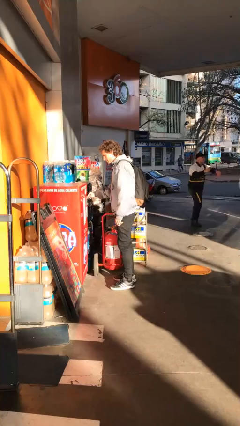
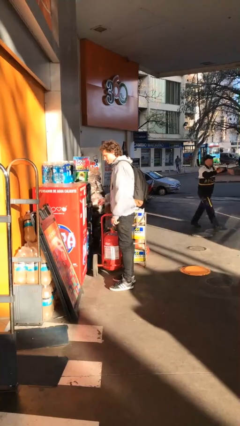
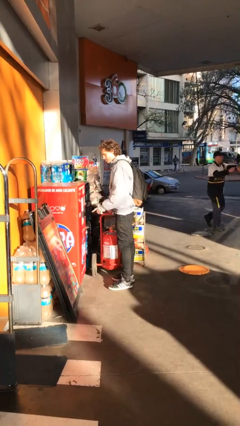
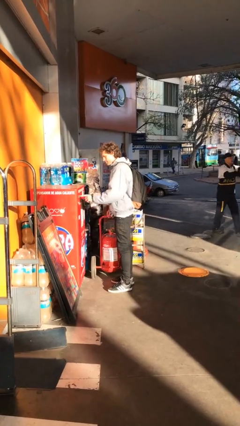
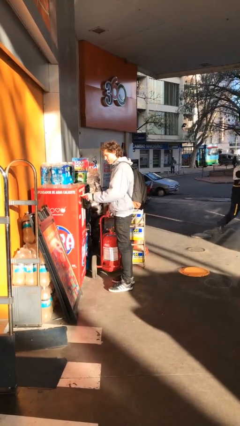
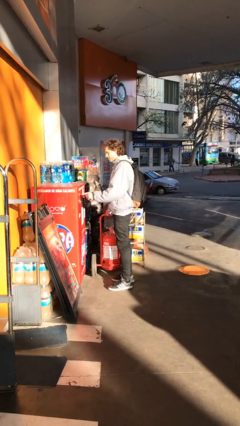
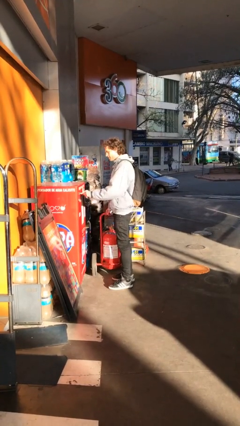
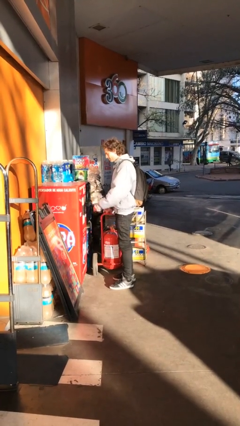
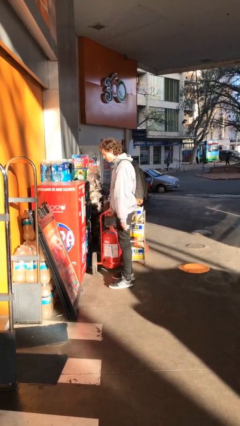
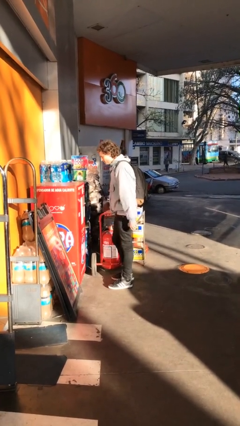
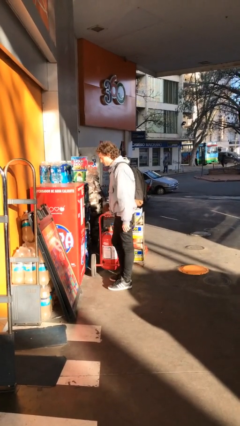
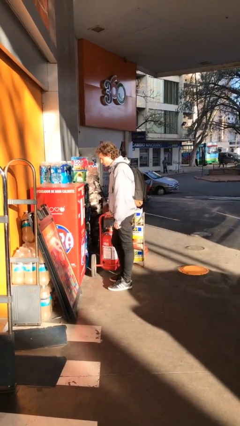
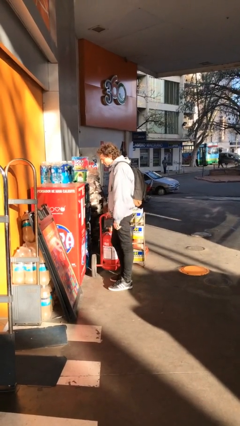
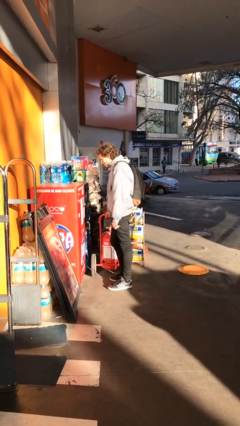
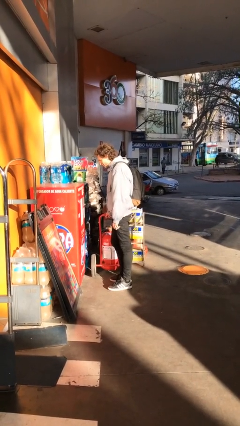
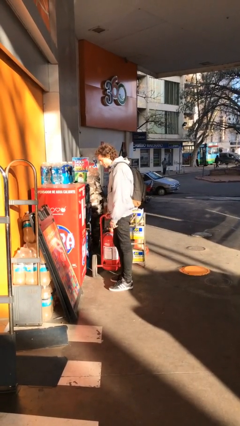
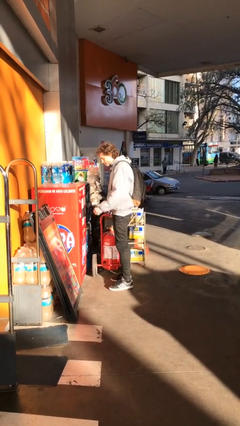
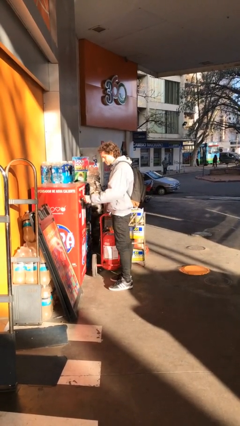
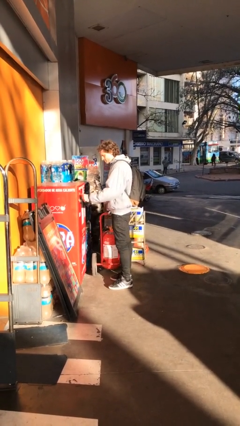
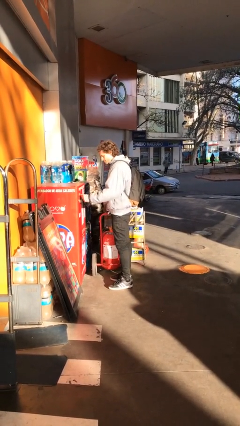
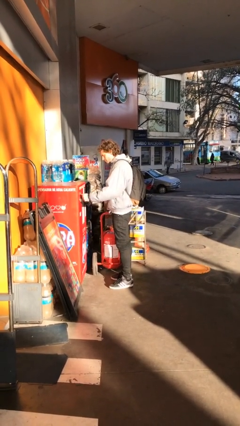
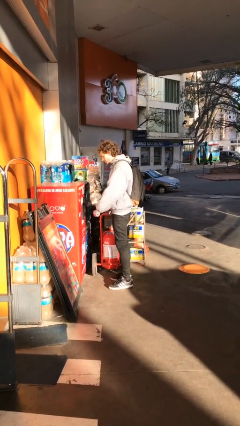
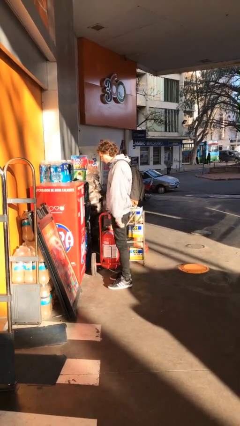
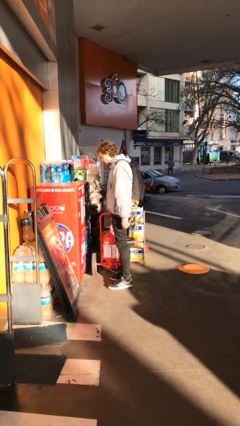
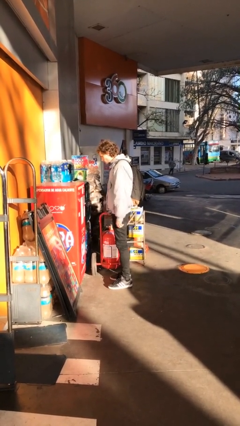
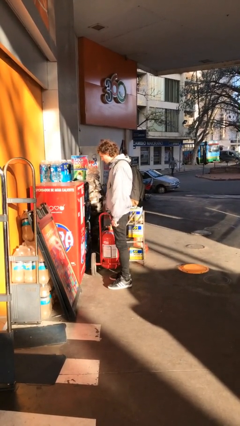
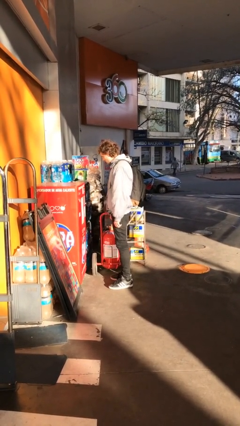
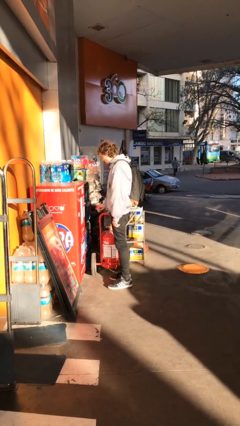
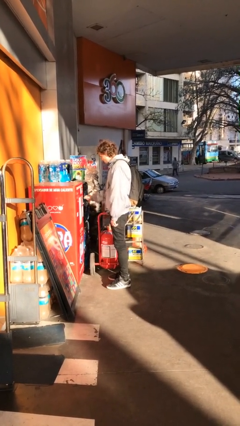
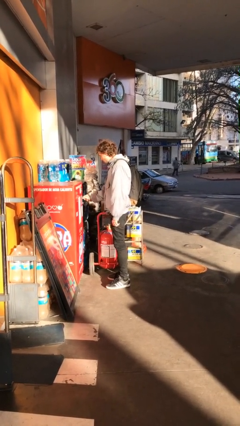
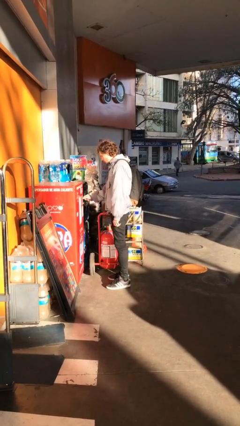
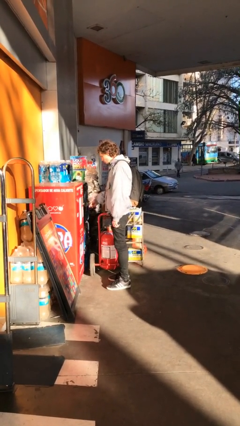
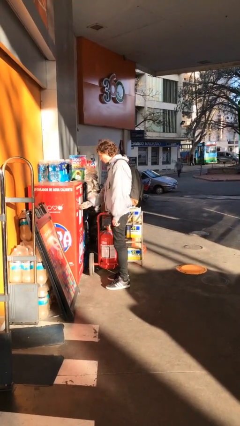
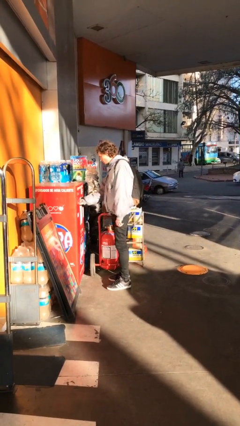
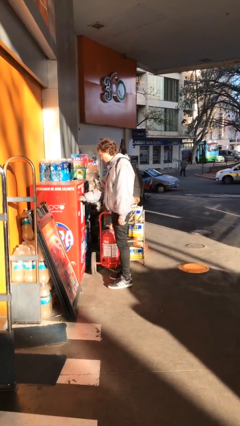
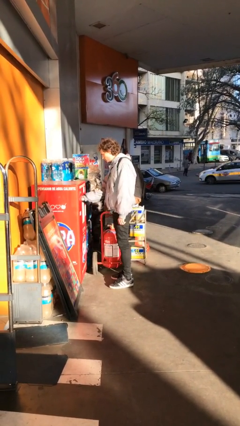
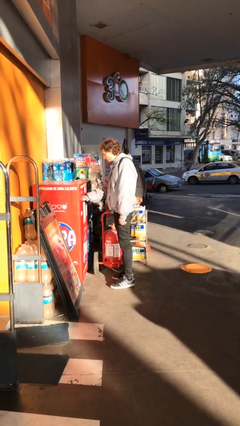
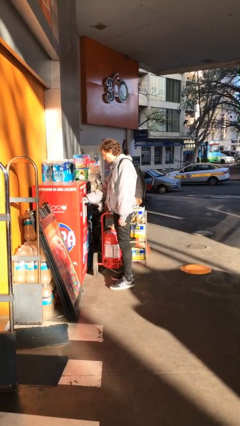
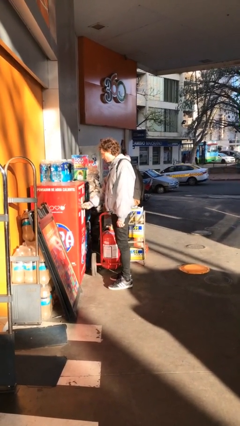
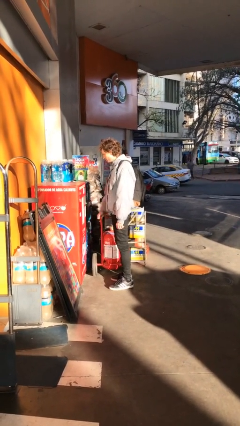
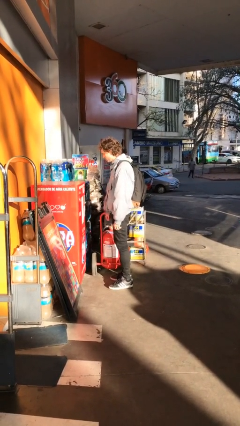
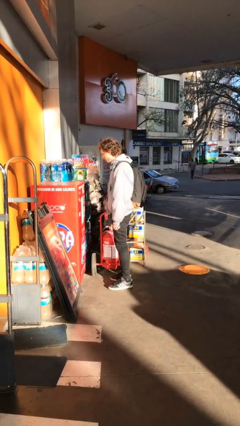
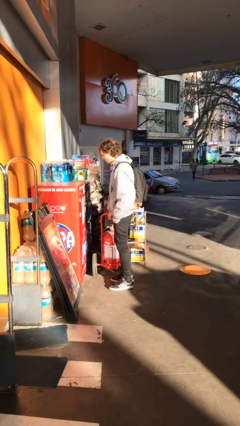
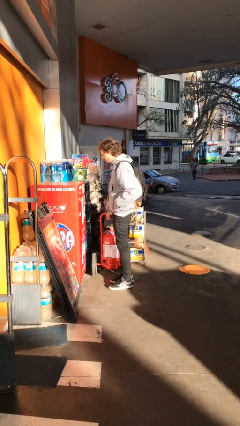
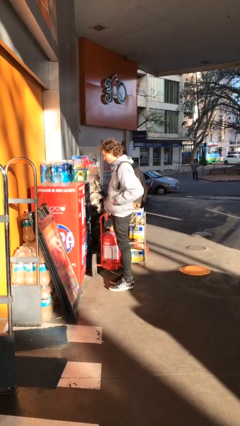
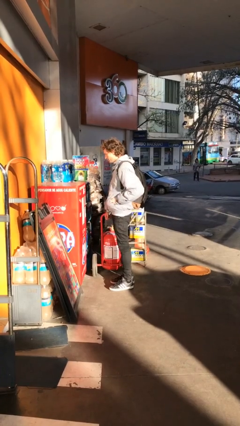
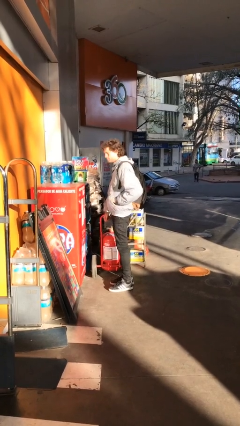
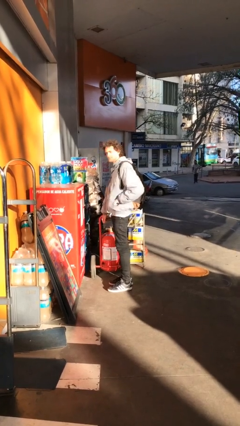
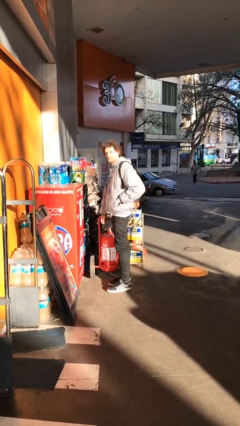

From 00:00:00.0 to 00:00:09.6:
person purchases from machine

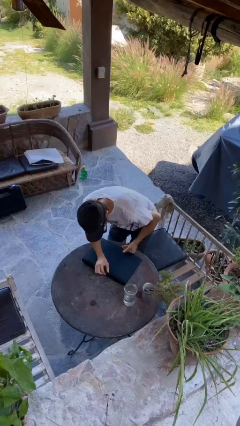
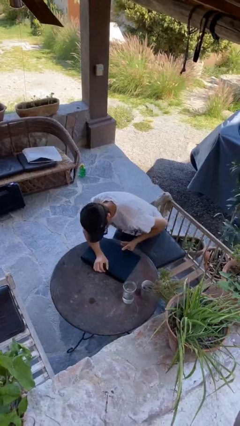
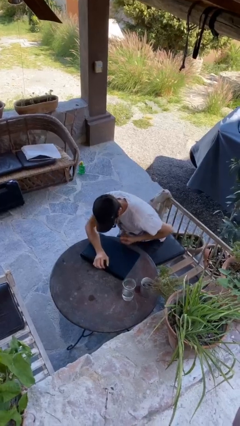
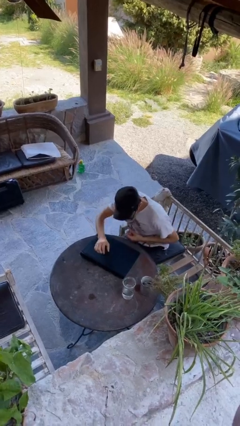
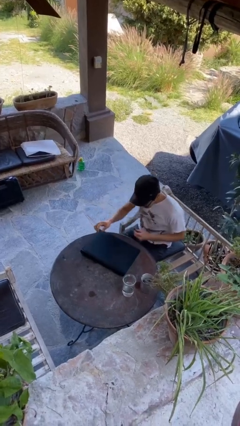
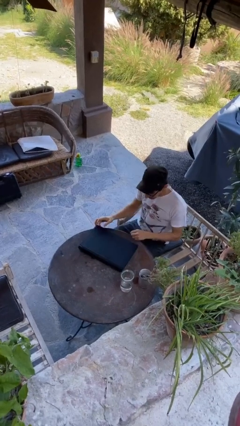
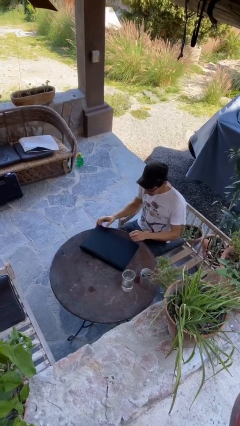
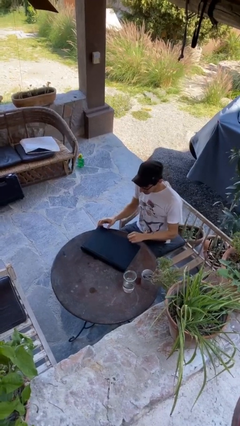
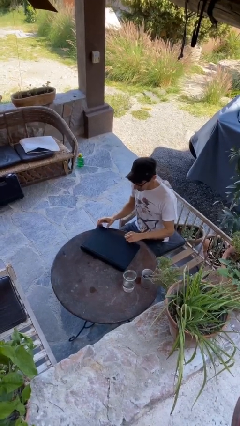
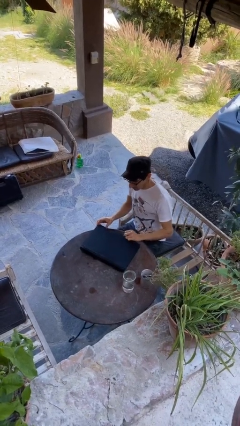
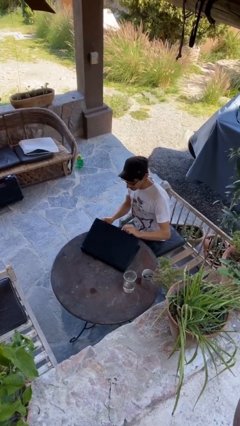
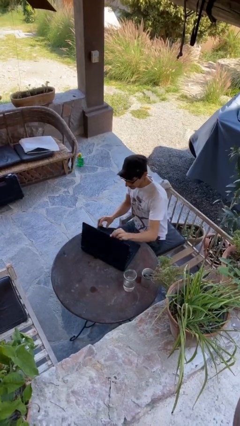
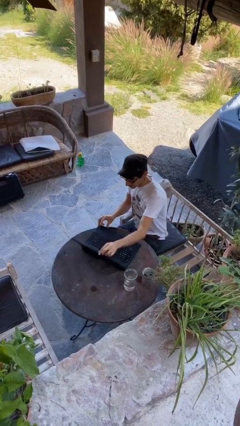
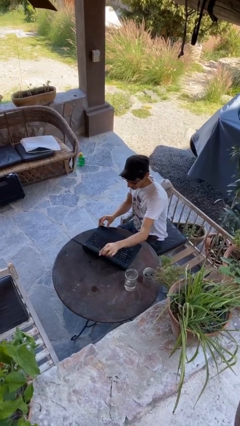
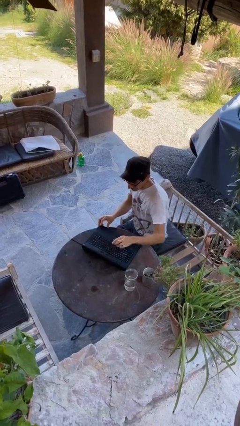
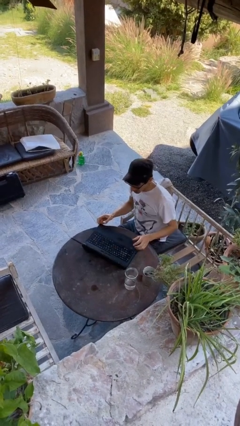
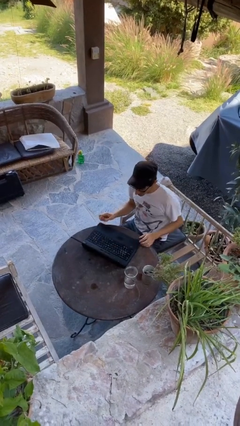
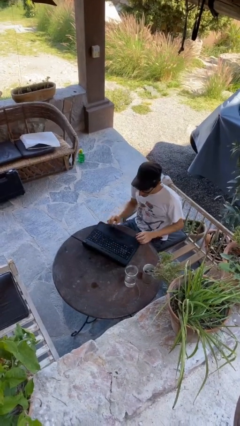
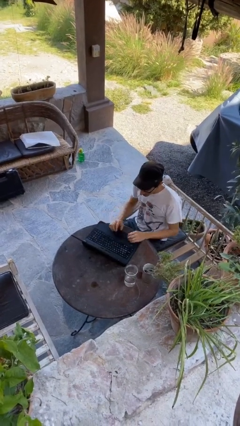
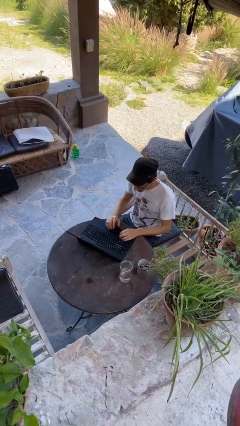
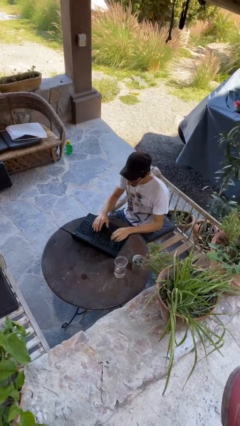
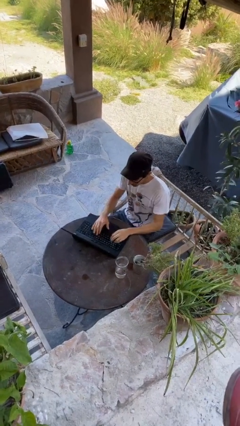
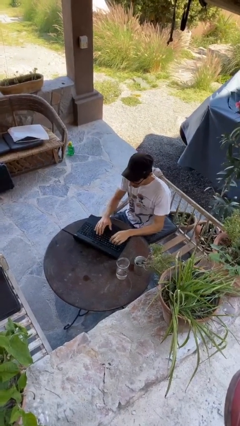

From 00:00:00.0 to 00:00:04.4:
person sits down

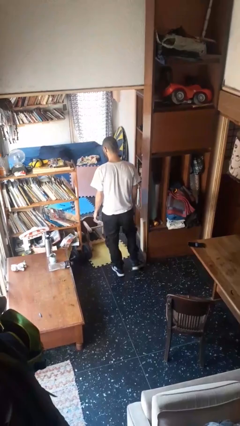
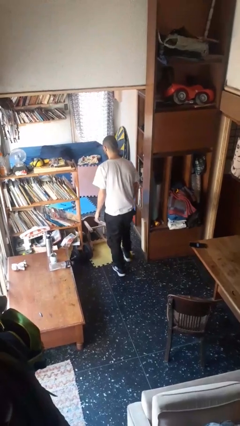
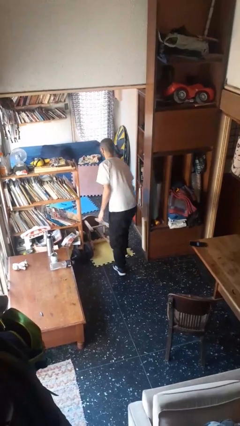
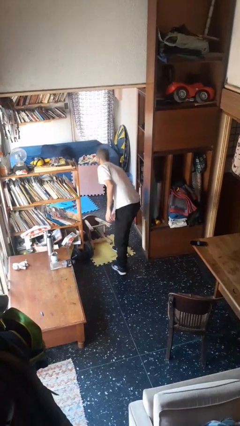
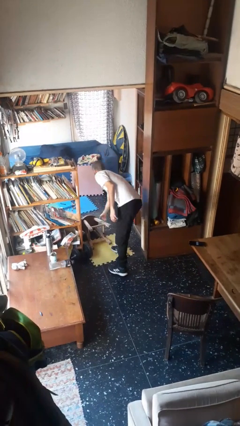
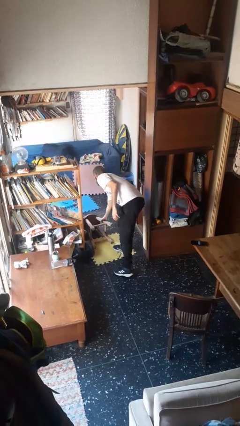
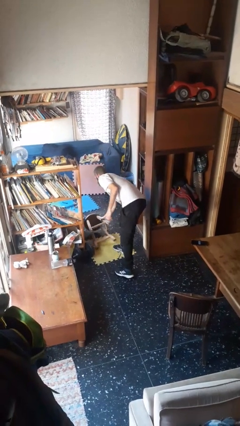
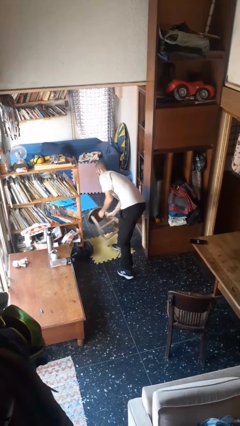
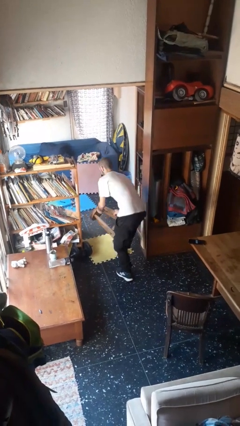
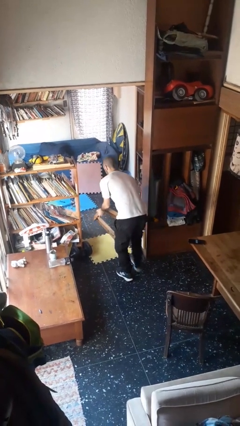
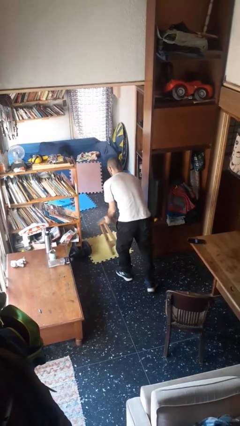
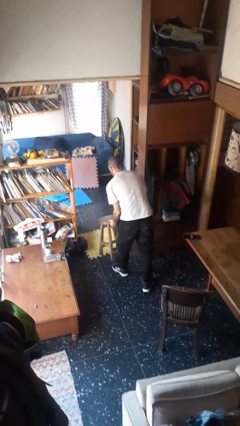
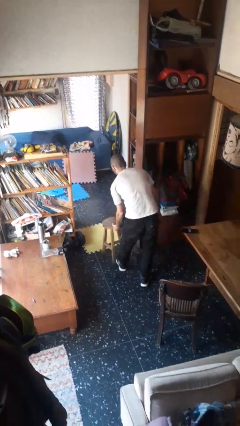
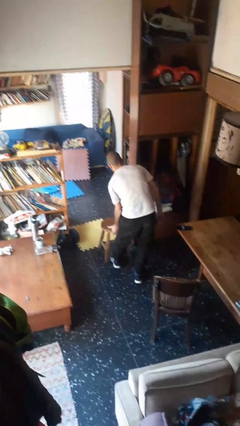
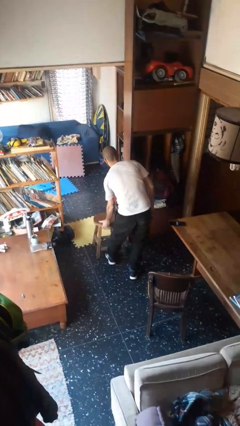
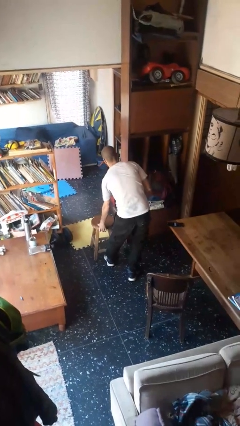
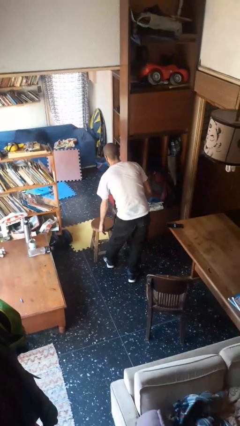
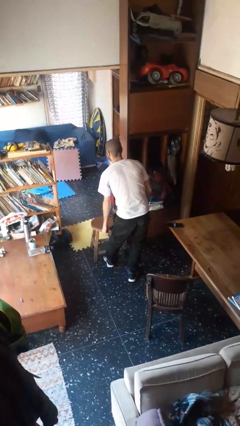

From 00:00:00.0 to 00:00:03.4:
person sets upright furniture

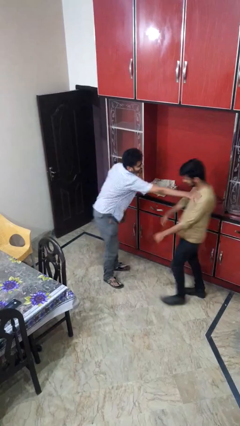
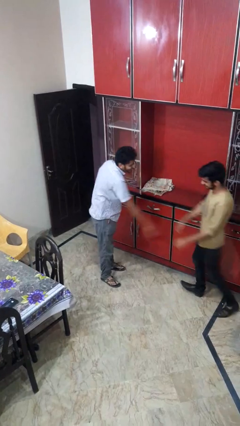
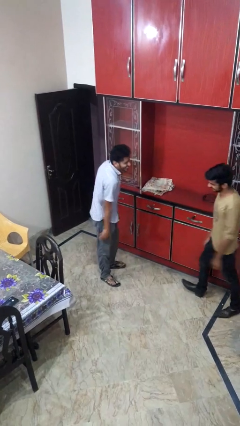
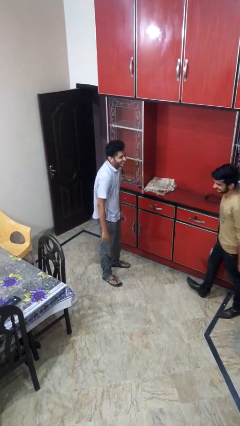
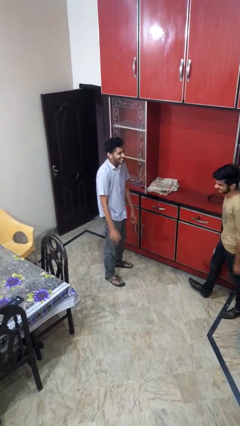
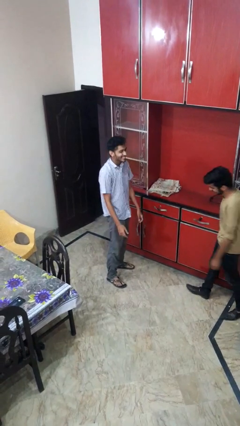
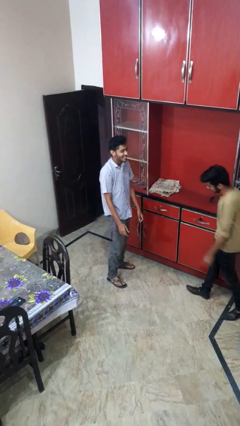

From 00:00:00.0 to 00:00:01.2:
person shoves person
